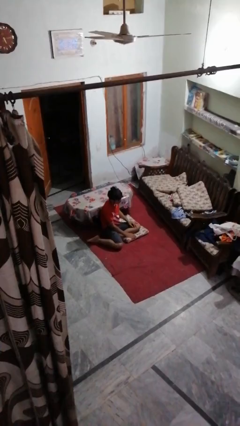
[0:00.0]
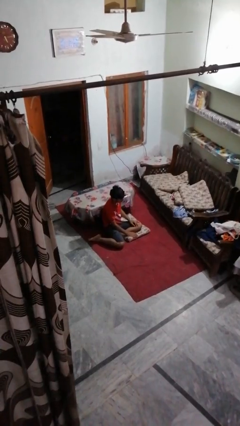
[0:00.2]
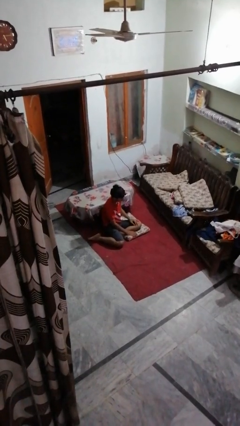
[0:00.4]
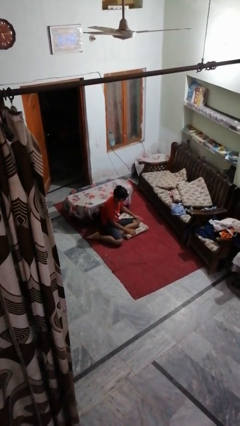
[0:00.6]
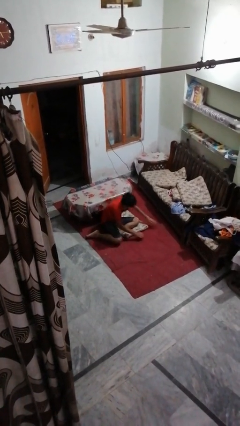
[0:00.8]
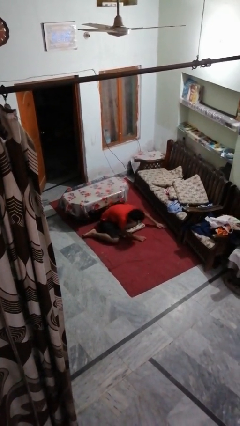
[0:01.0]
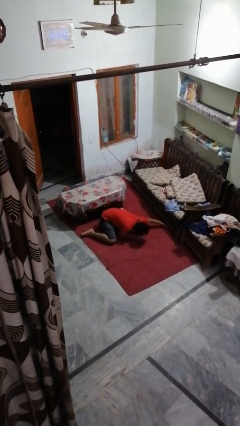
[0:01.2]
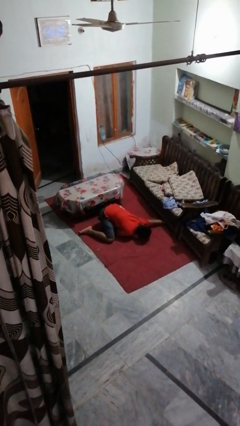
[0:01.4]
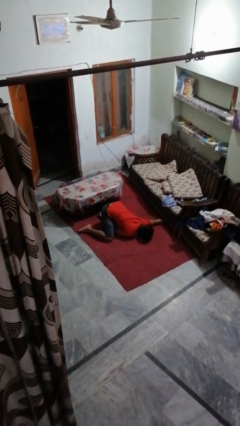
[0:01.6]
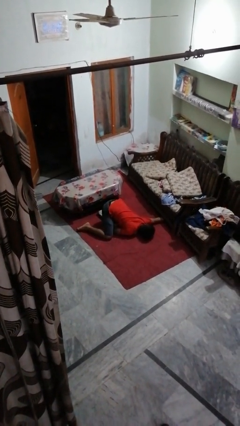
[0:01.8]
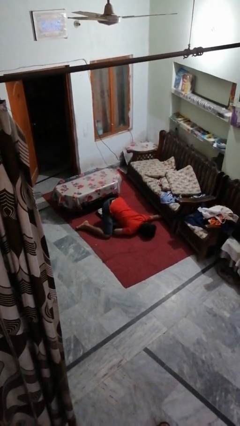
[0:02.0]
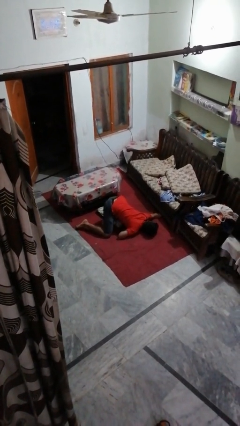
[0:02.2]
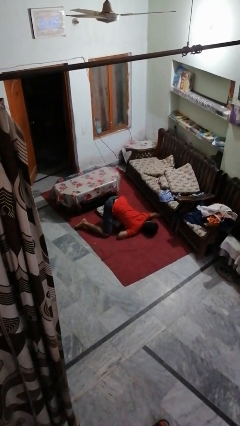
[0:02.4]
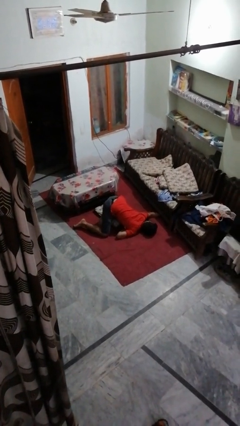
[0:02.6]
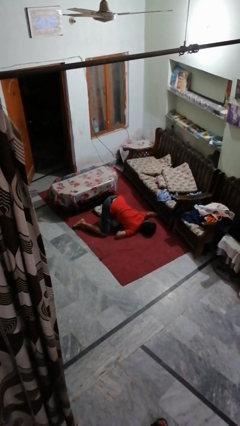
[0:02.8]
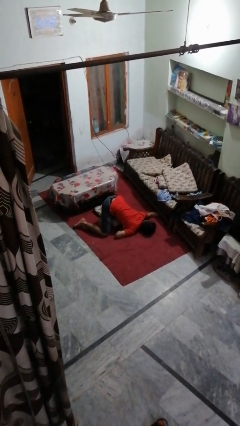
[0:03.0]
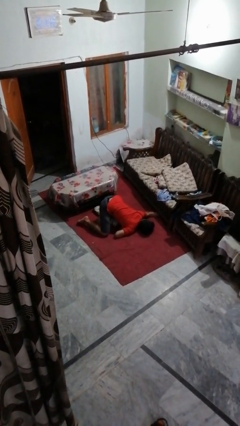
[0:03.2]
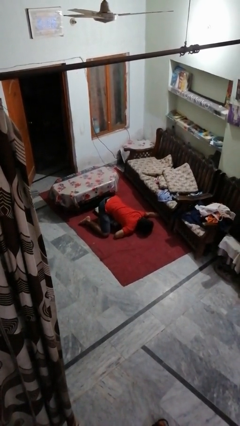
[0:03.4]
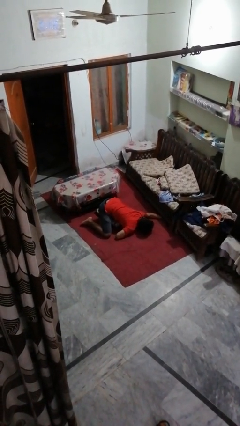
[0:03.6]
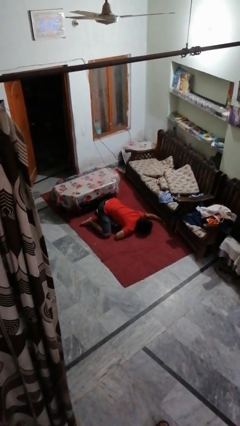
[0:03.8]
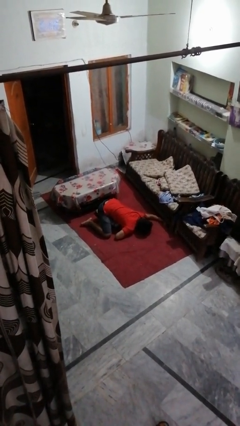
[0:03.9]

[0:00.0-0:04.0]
person searches under couch

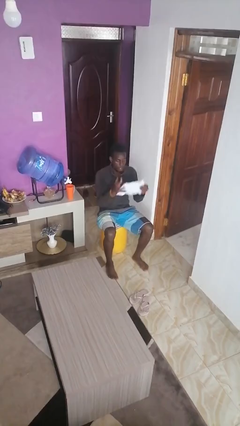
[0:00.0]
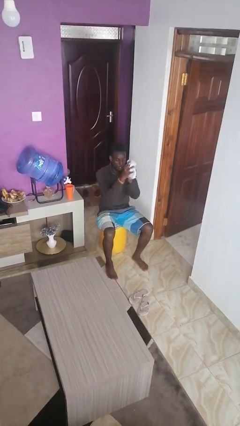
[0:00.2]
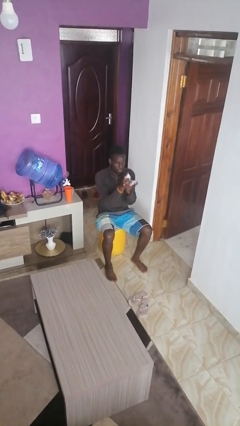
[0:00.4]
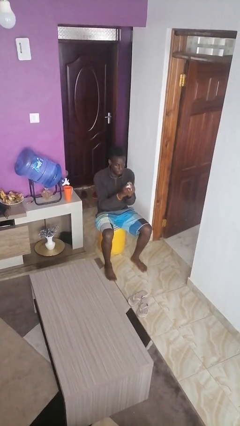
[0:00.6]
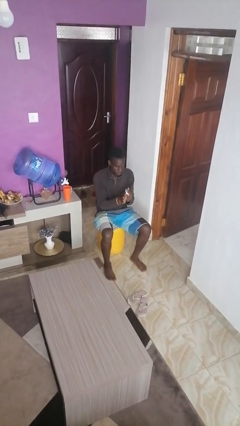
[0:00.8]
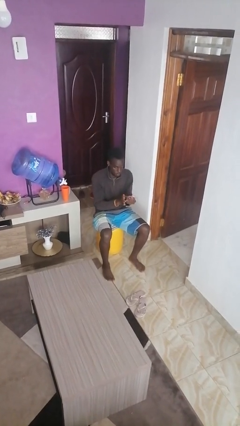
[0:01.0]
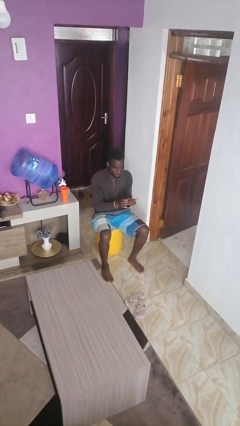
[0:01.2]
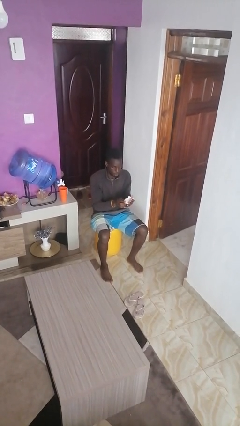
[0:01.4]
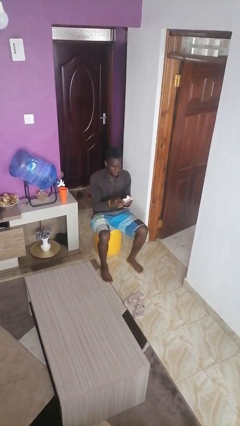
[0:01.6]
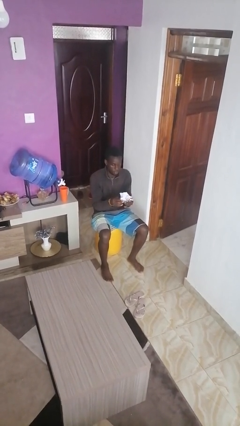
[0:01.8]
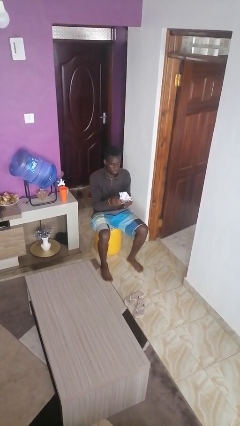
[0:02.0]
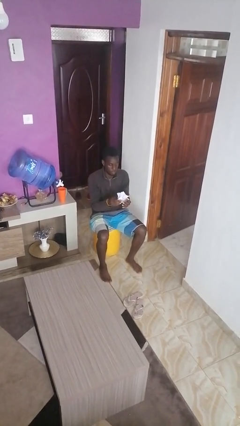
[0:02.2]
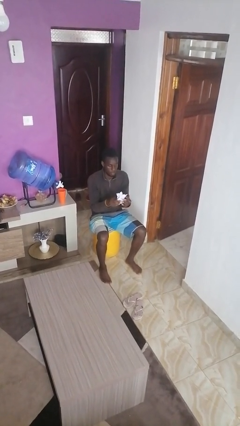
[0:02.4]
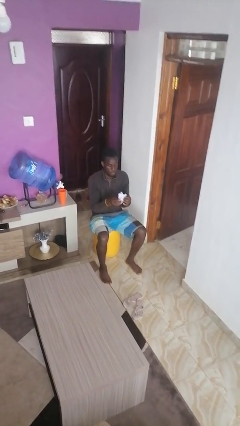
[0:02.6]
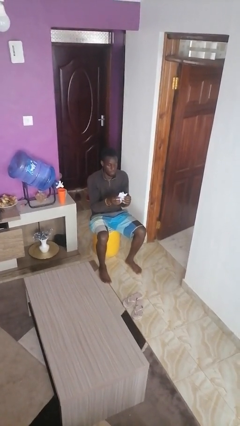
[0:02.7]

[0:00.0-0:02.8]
person crumples paper

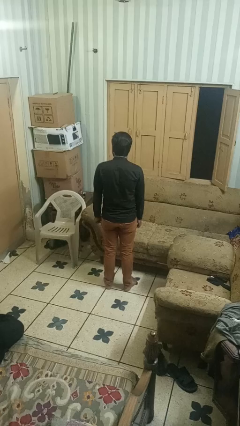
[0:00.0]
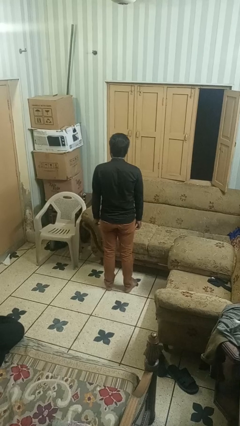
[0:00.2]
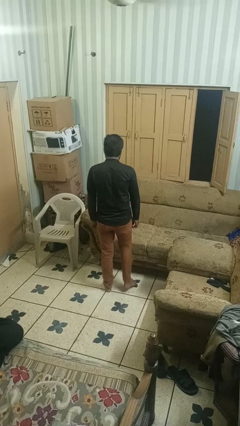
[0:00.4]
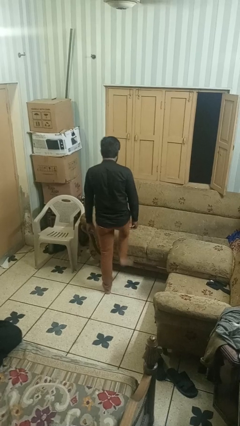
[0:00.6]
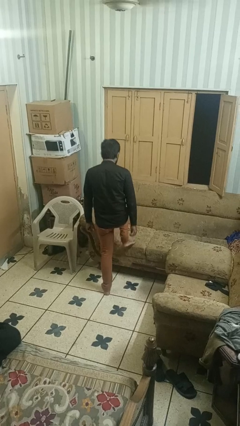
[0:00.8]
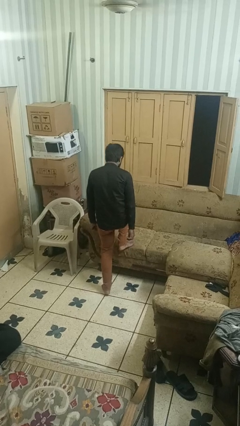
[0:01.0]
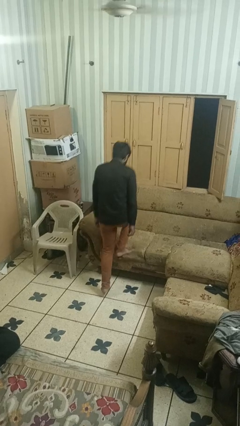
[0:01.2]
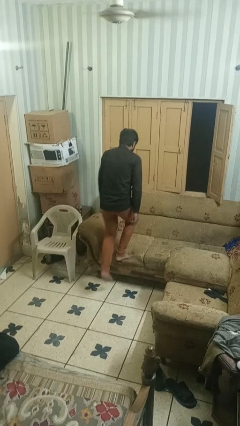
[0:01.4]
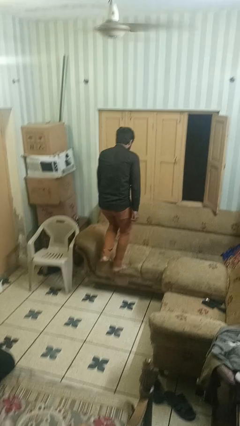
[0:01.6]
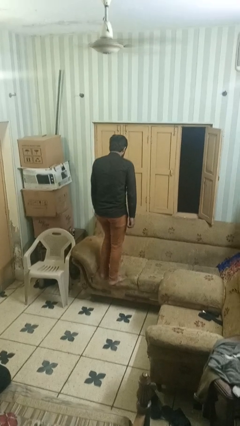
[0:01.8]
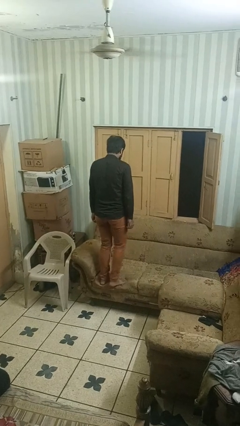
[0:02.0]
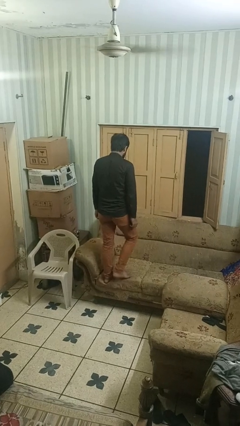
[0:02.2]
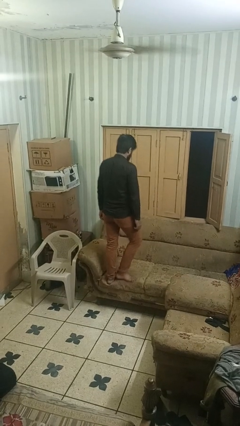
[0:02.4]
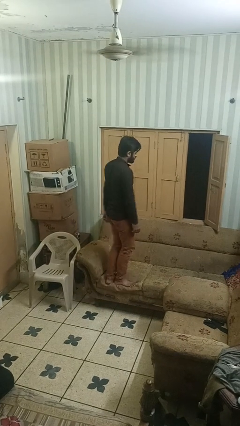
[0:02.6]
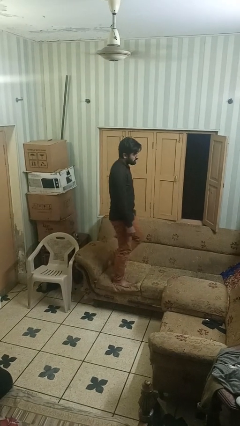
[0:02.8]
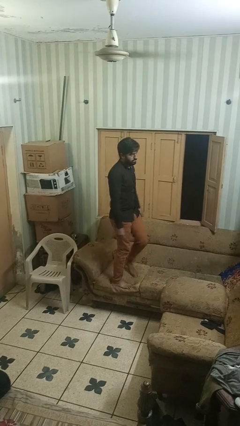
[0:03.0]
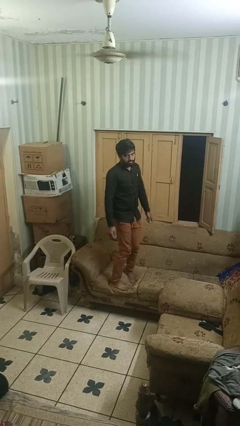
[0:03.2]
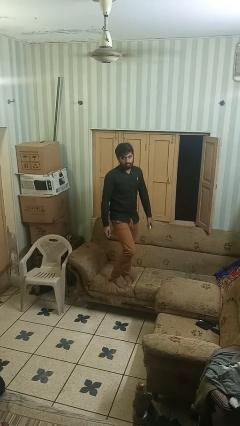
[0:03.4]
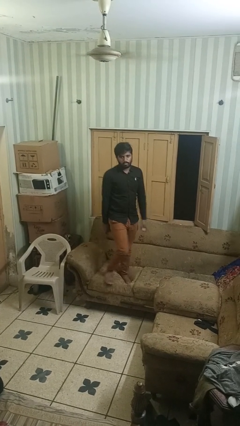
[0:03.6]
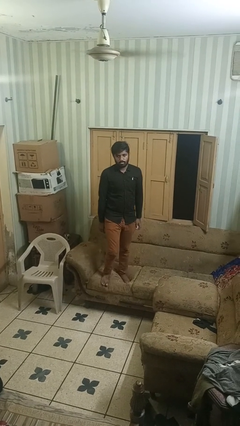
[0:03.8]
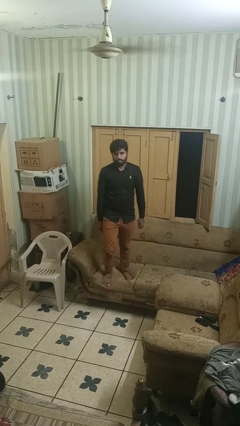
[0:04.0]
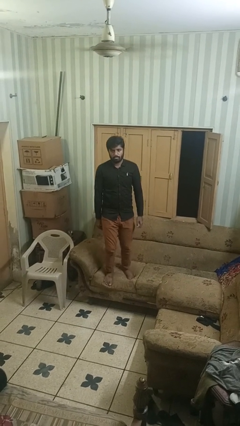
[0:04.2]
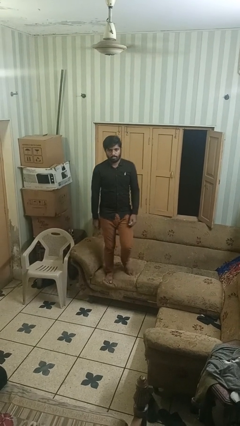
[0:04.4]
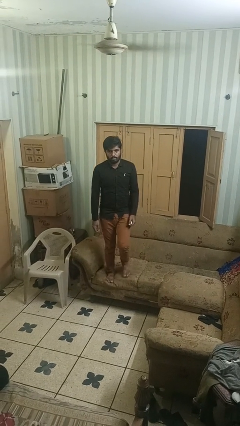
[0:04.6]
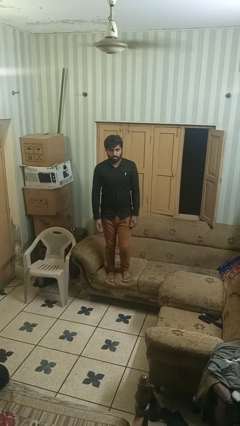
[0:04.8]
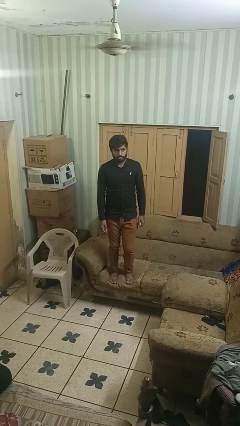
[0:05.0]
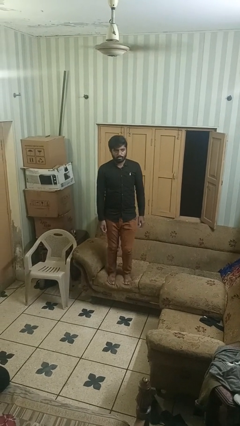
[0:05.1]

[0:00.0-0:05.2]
person climbs on couch

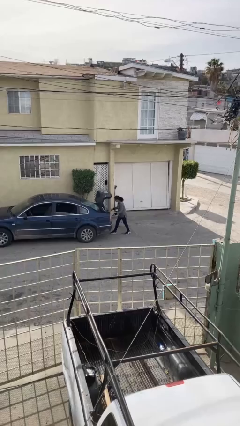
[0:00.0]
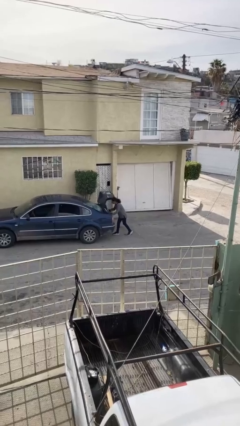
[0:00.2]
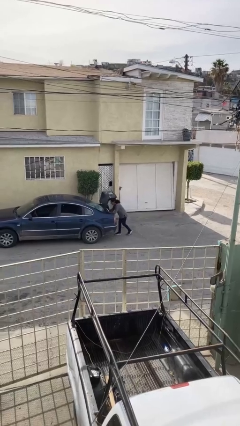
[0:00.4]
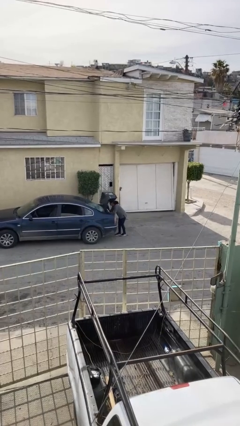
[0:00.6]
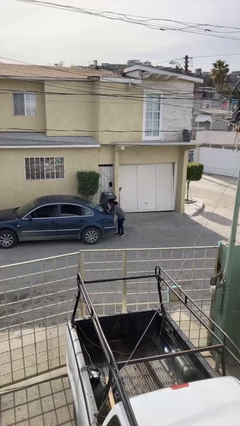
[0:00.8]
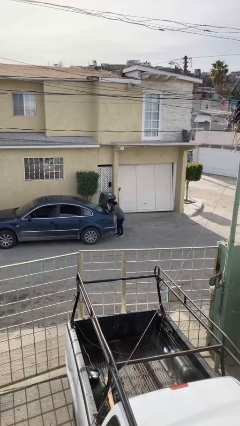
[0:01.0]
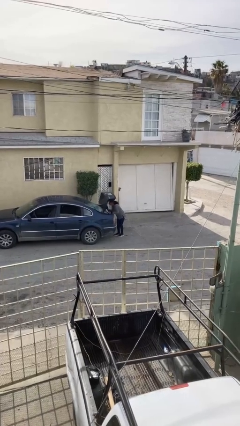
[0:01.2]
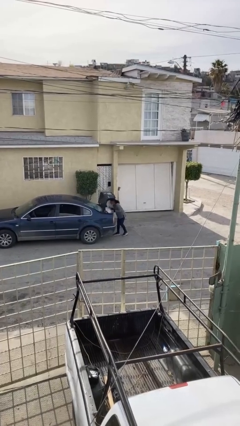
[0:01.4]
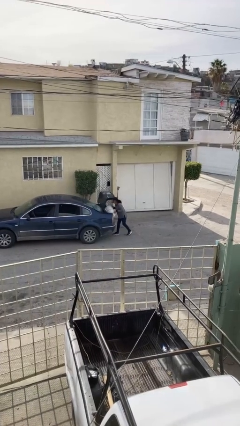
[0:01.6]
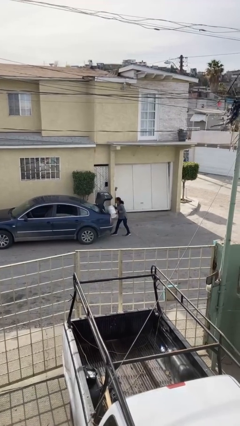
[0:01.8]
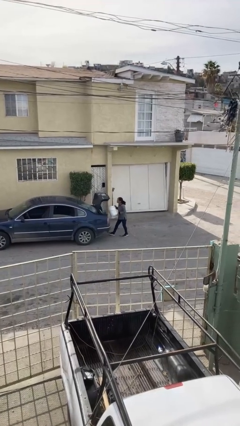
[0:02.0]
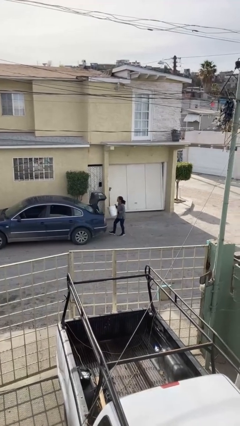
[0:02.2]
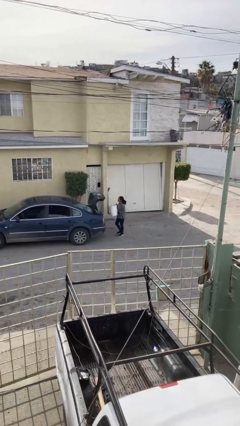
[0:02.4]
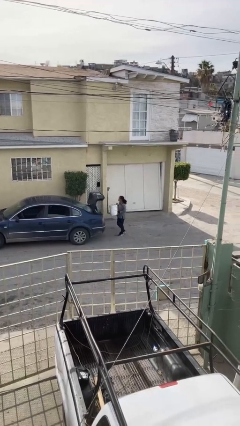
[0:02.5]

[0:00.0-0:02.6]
person unloads car

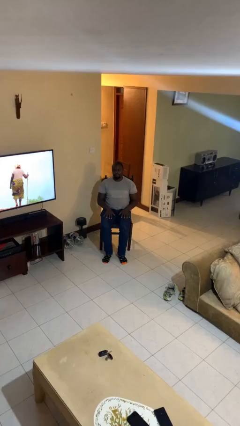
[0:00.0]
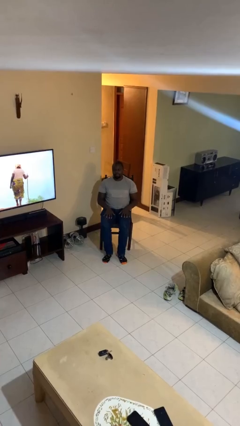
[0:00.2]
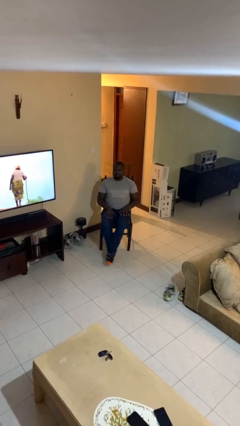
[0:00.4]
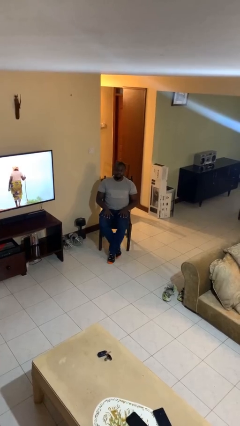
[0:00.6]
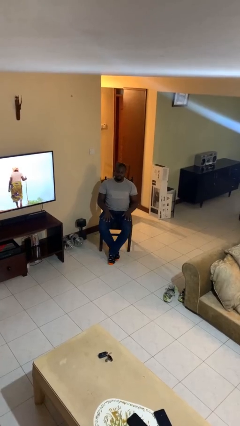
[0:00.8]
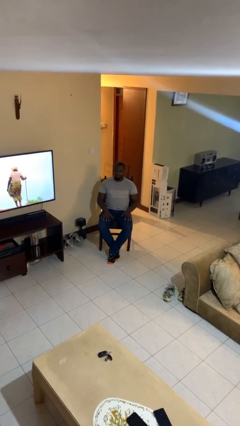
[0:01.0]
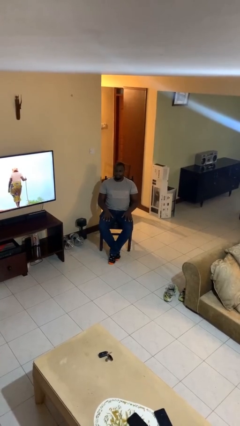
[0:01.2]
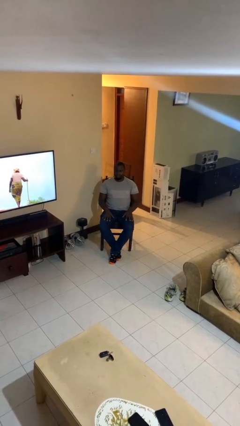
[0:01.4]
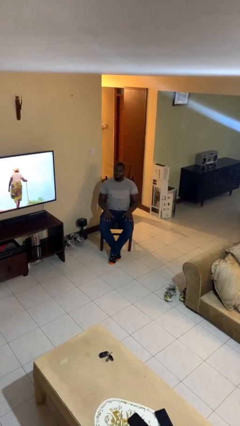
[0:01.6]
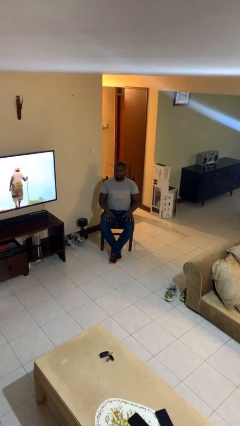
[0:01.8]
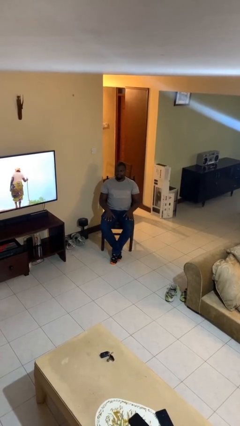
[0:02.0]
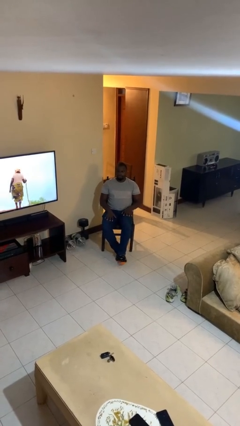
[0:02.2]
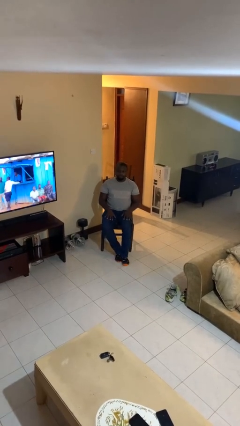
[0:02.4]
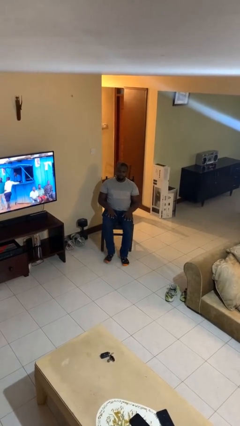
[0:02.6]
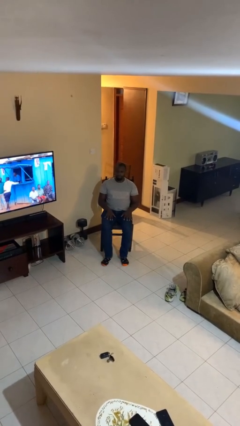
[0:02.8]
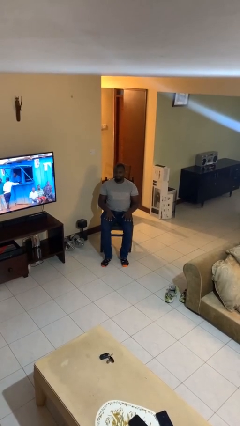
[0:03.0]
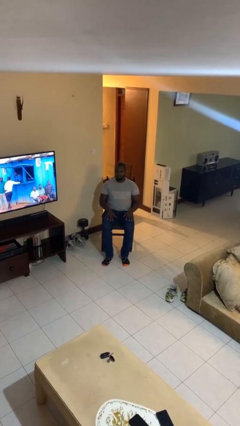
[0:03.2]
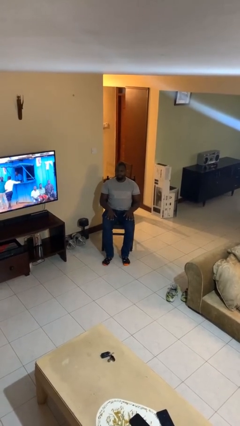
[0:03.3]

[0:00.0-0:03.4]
person crosses legs
